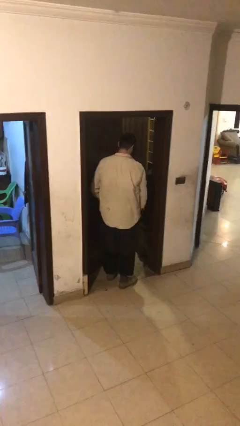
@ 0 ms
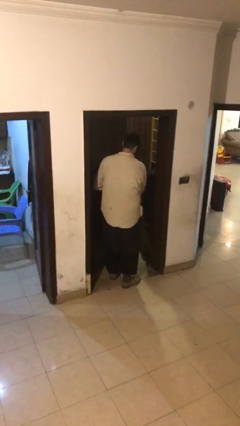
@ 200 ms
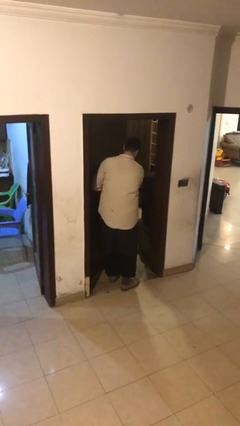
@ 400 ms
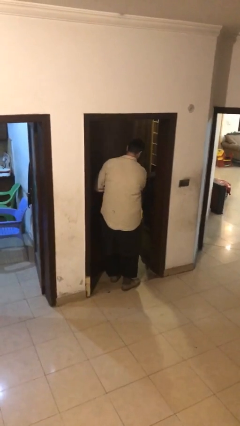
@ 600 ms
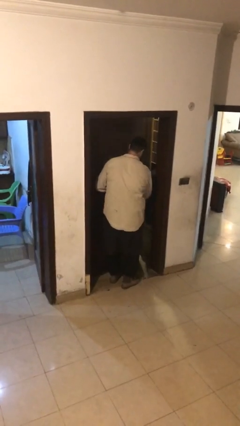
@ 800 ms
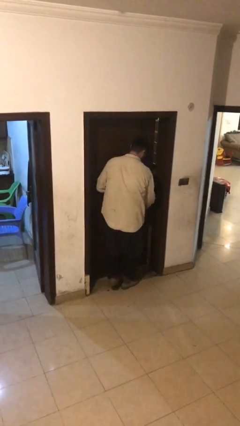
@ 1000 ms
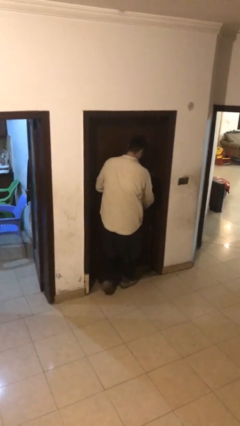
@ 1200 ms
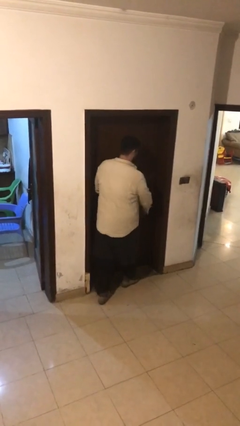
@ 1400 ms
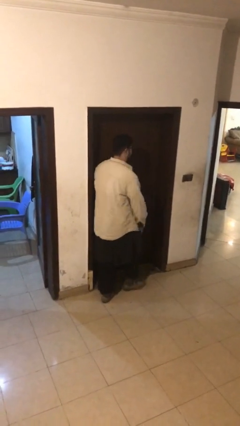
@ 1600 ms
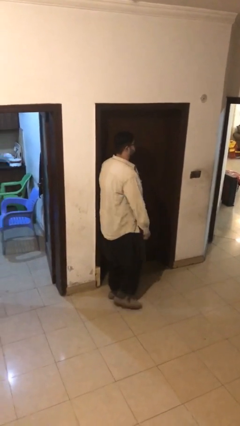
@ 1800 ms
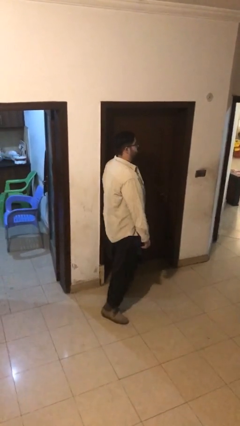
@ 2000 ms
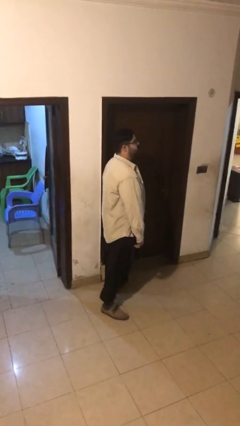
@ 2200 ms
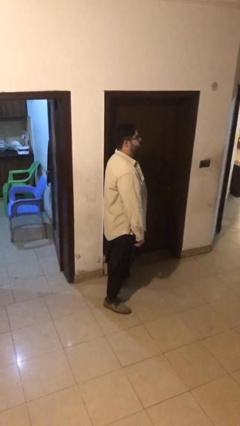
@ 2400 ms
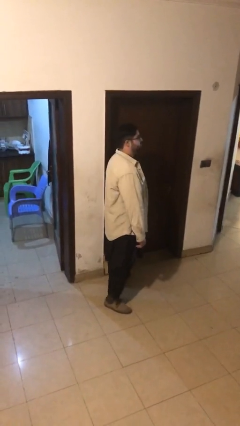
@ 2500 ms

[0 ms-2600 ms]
person closes facility door

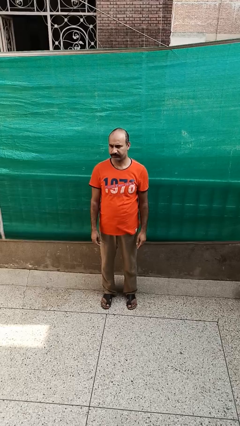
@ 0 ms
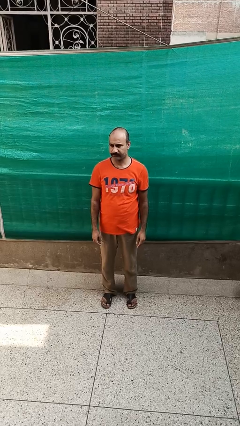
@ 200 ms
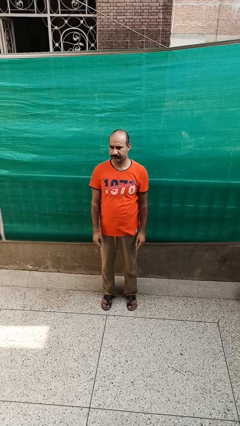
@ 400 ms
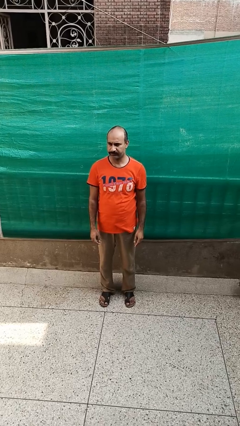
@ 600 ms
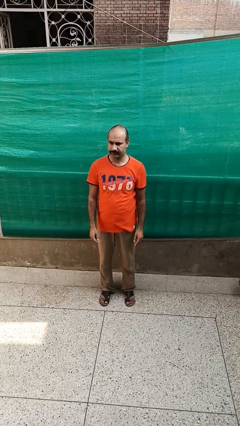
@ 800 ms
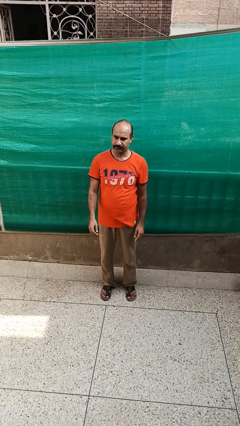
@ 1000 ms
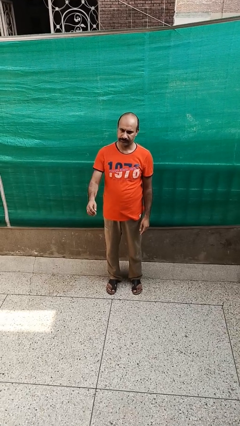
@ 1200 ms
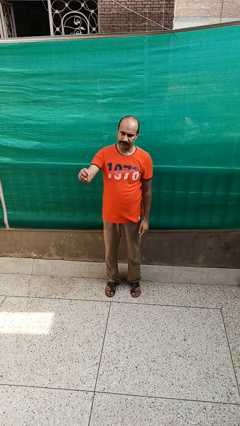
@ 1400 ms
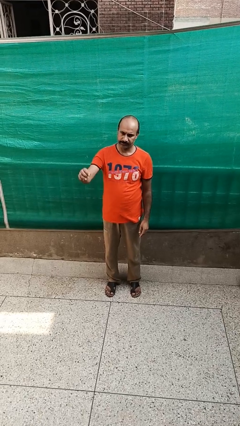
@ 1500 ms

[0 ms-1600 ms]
person gestures lower hand

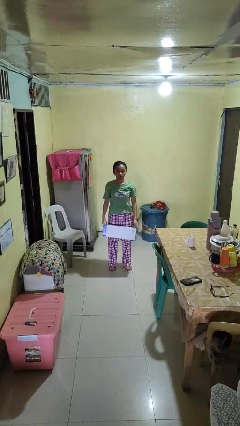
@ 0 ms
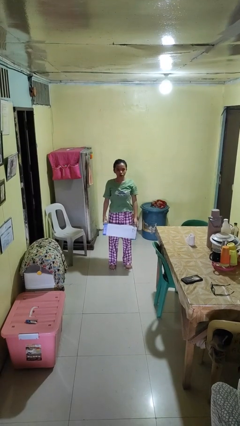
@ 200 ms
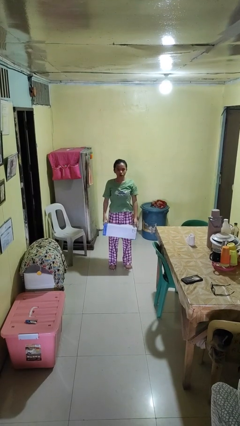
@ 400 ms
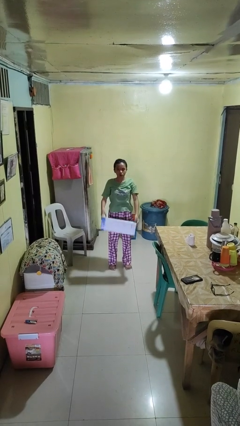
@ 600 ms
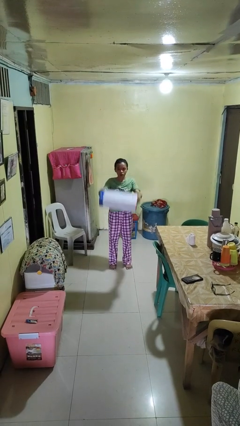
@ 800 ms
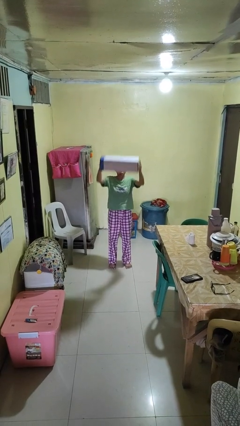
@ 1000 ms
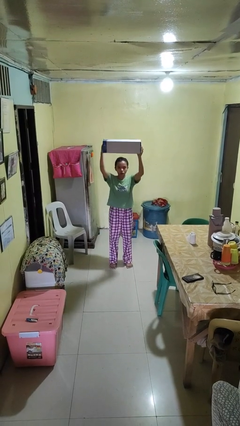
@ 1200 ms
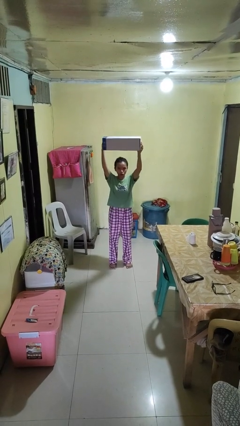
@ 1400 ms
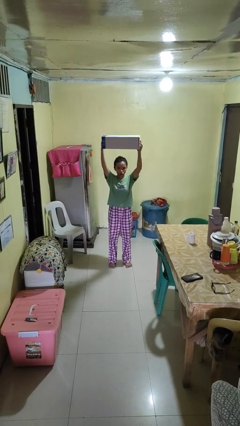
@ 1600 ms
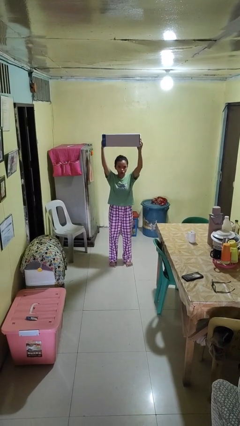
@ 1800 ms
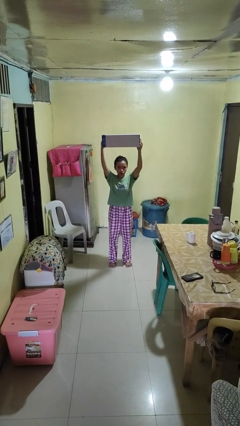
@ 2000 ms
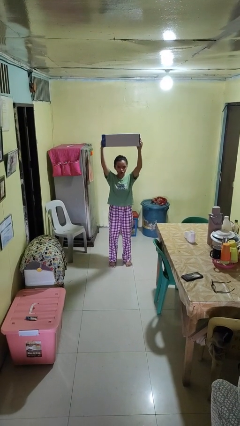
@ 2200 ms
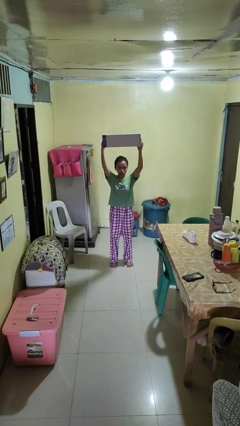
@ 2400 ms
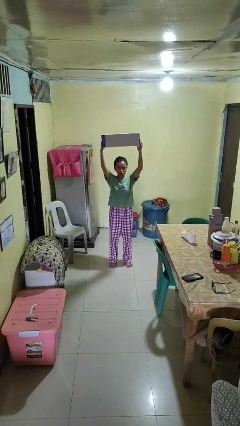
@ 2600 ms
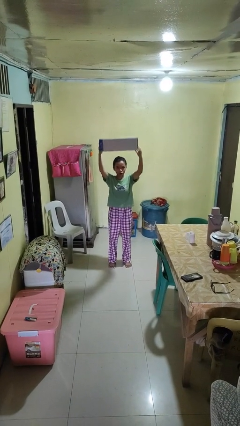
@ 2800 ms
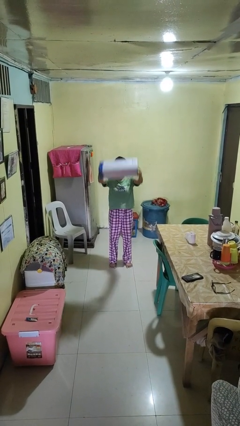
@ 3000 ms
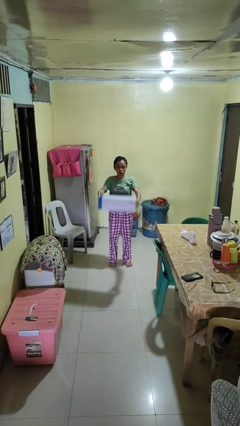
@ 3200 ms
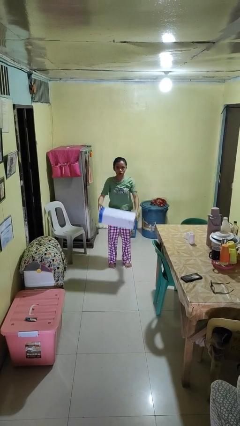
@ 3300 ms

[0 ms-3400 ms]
person holds object above head

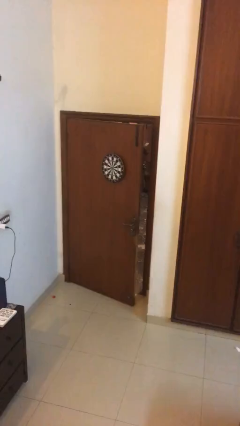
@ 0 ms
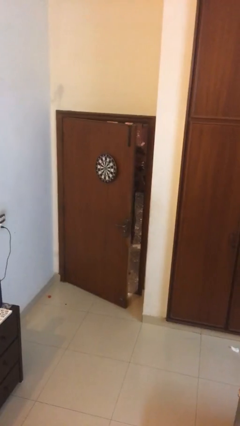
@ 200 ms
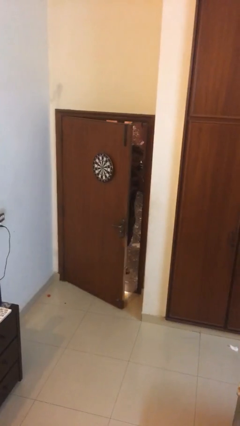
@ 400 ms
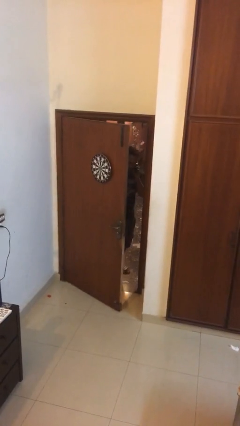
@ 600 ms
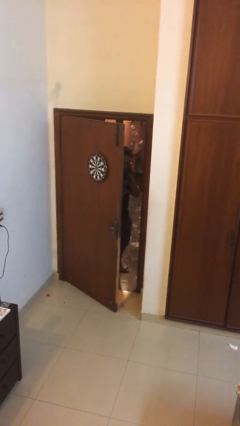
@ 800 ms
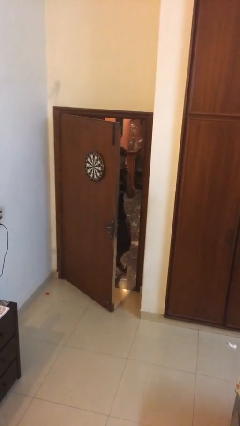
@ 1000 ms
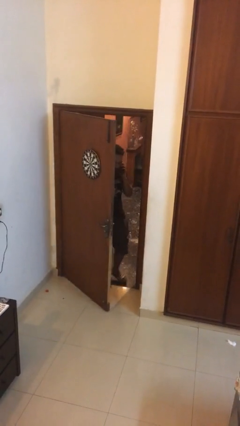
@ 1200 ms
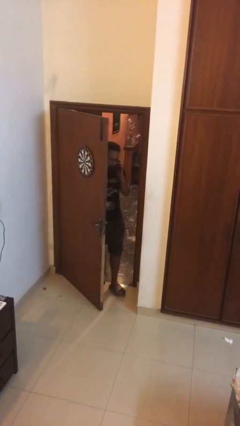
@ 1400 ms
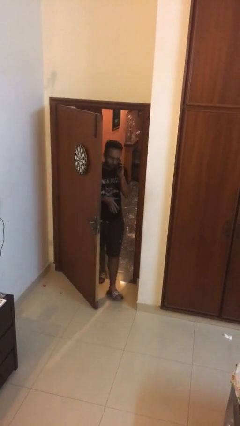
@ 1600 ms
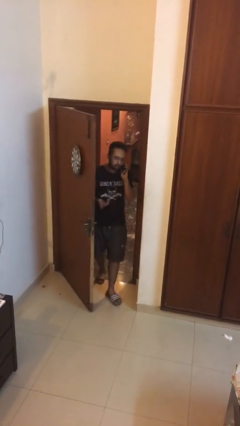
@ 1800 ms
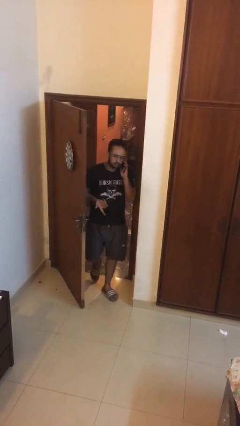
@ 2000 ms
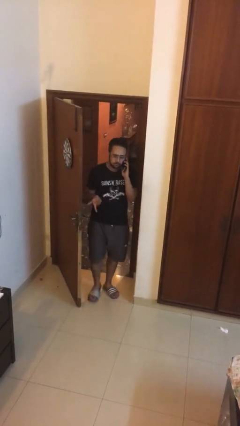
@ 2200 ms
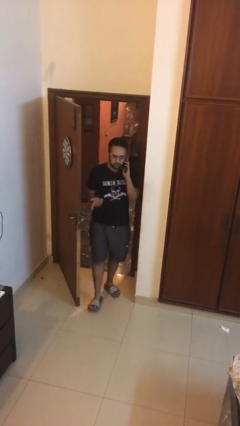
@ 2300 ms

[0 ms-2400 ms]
person enters scene through structure

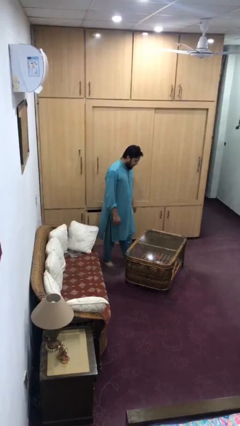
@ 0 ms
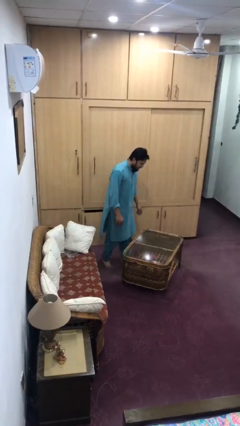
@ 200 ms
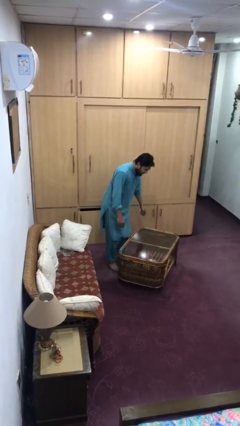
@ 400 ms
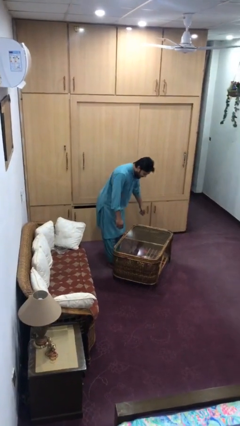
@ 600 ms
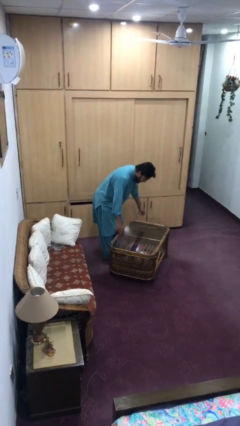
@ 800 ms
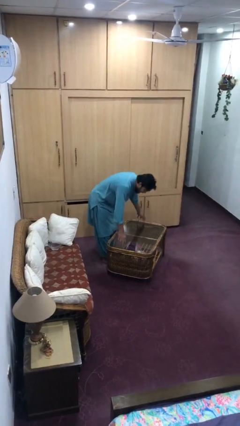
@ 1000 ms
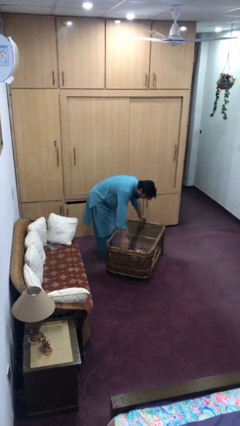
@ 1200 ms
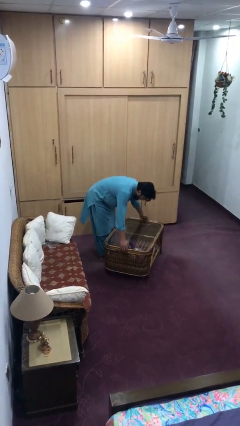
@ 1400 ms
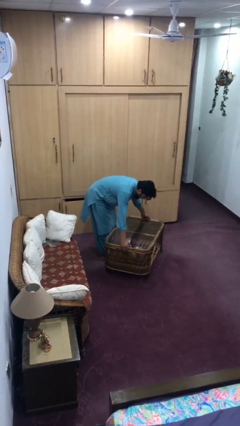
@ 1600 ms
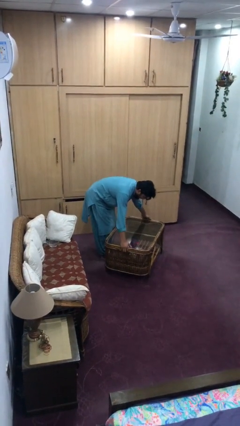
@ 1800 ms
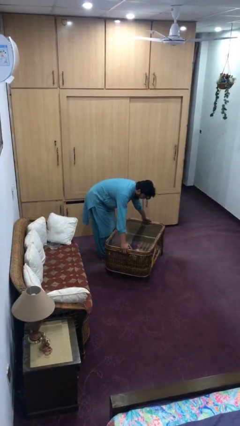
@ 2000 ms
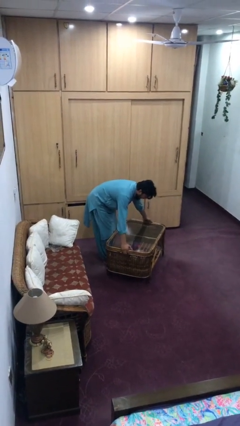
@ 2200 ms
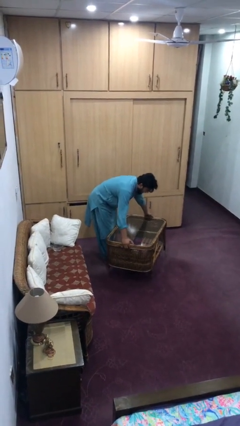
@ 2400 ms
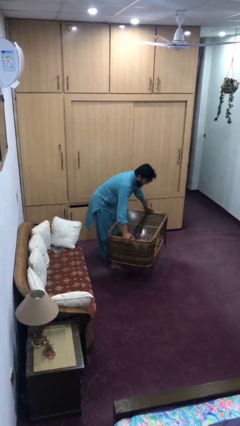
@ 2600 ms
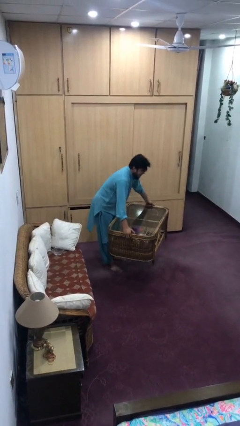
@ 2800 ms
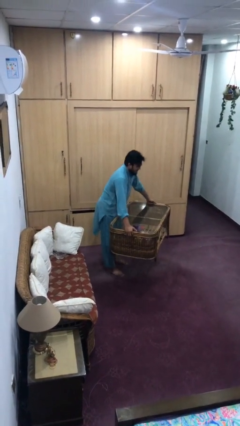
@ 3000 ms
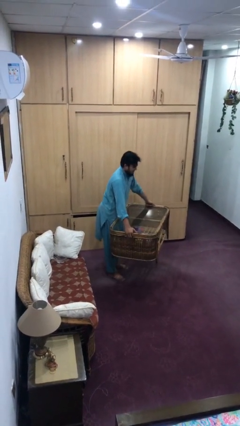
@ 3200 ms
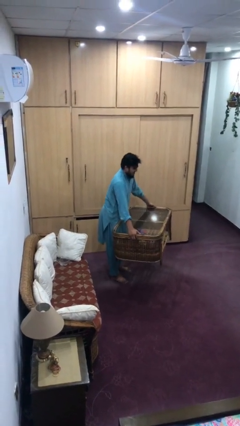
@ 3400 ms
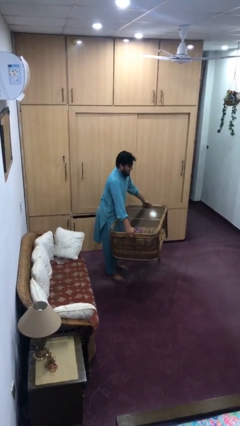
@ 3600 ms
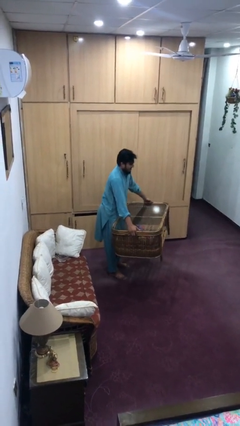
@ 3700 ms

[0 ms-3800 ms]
person picks up object from floor

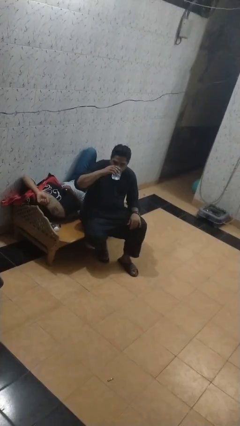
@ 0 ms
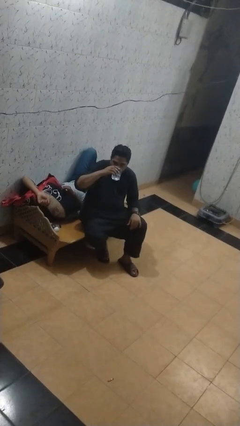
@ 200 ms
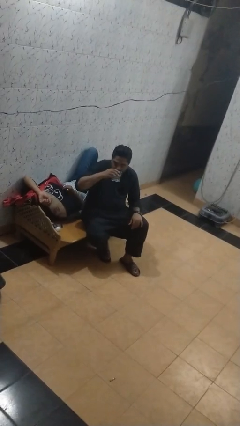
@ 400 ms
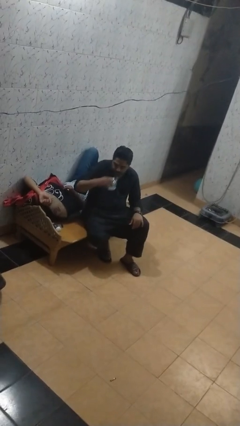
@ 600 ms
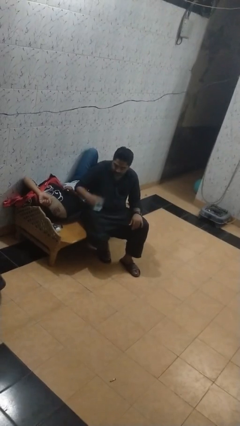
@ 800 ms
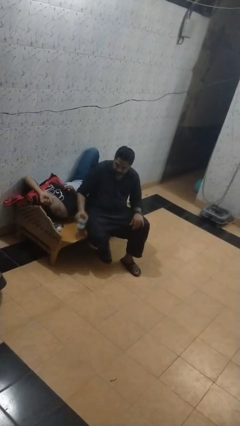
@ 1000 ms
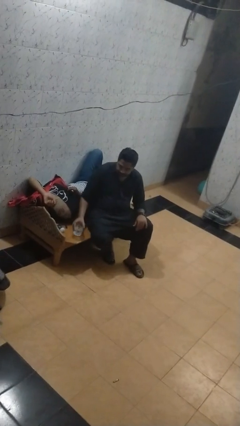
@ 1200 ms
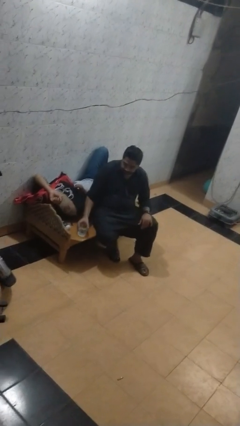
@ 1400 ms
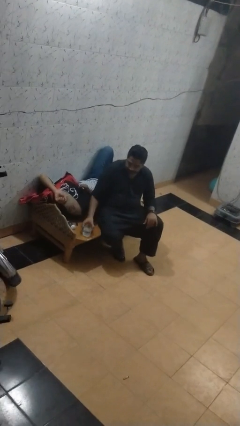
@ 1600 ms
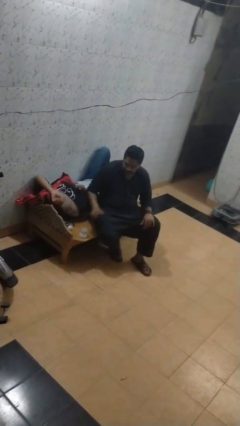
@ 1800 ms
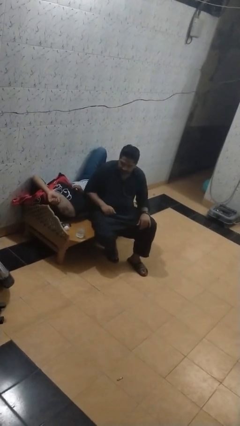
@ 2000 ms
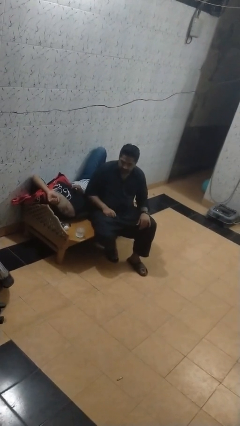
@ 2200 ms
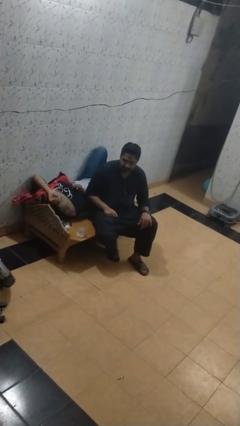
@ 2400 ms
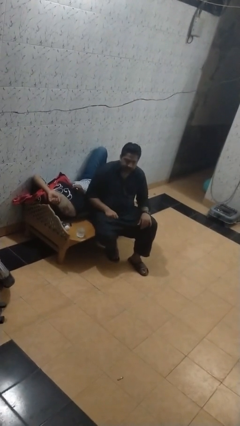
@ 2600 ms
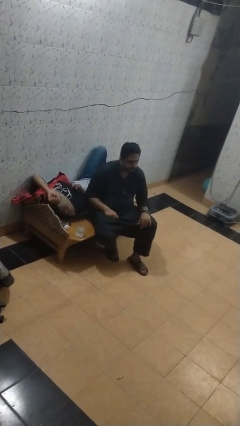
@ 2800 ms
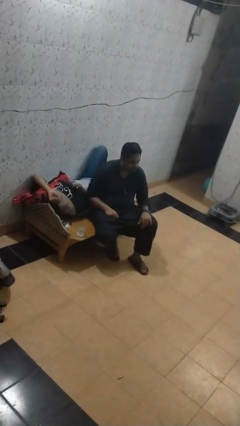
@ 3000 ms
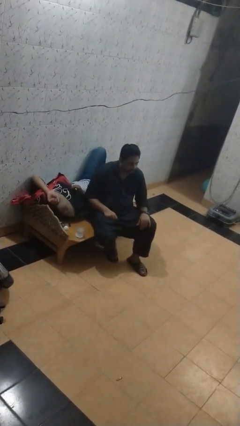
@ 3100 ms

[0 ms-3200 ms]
person puts down object on table

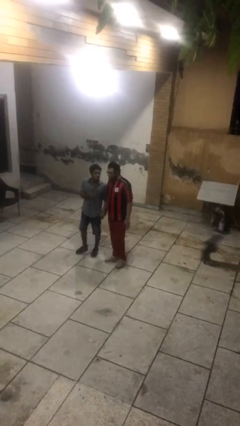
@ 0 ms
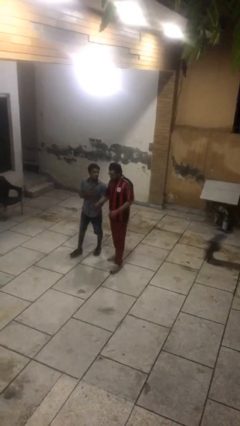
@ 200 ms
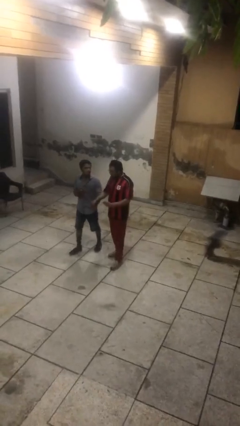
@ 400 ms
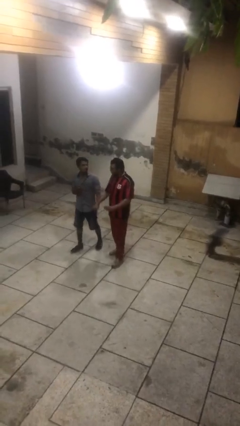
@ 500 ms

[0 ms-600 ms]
person holds hand
